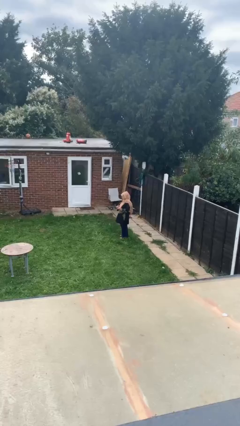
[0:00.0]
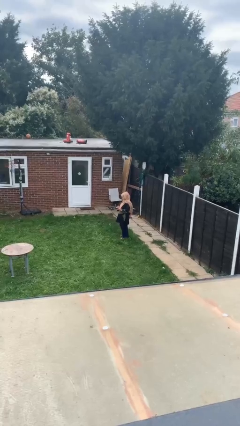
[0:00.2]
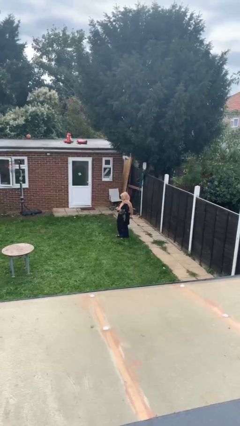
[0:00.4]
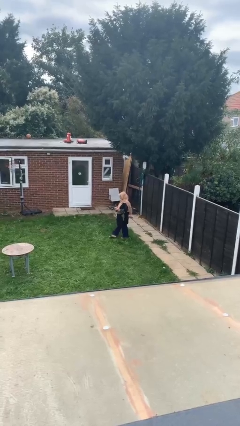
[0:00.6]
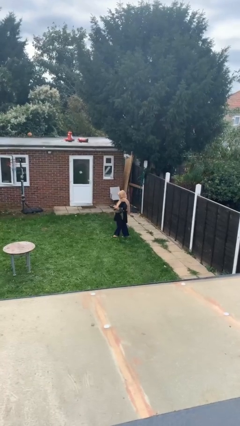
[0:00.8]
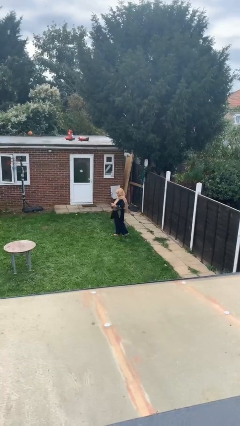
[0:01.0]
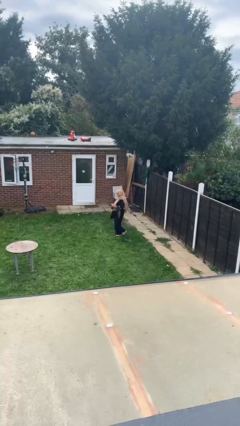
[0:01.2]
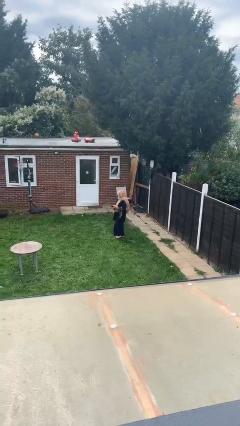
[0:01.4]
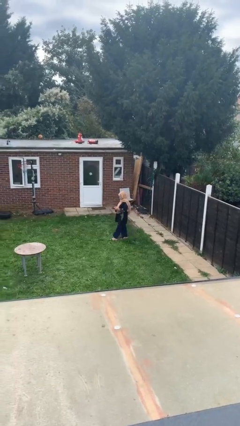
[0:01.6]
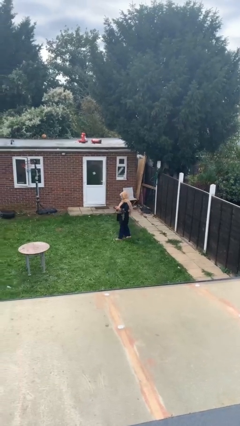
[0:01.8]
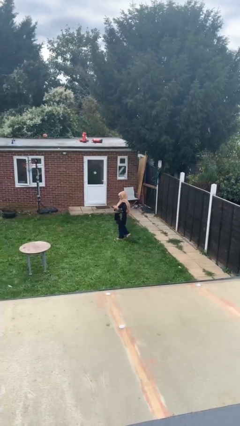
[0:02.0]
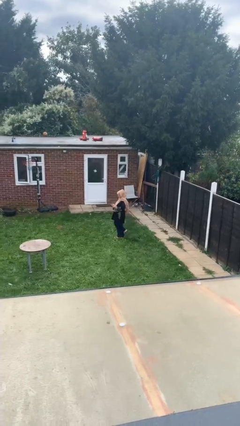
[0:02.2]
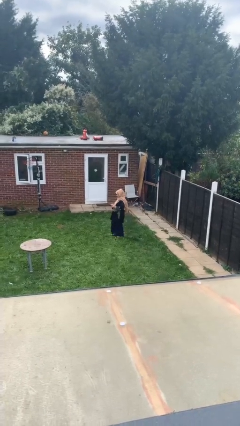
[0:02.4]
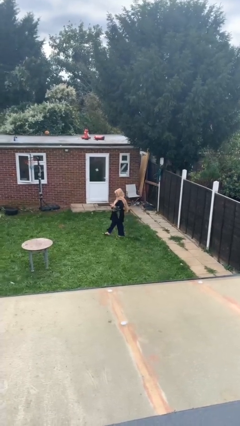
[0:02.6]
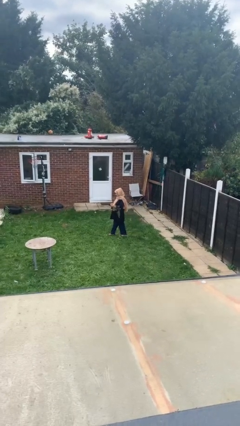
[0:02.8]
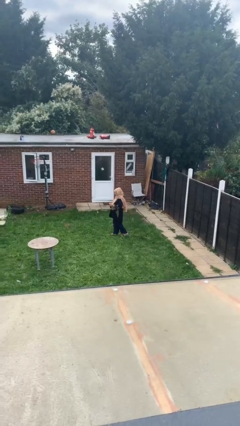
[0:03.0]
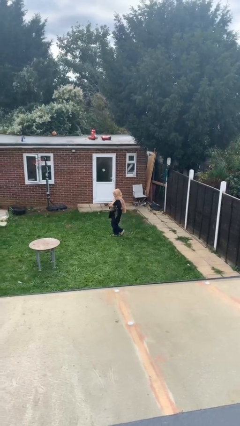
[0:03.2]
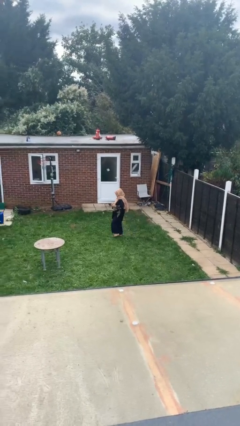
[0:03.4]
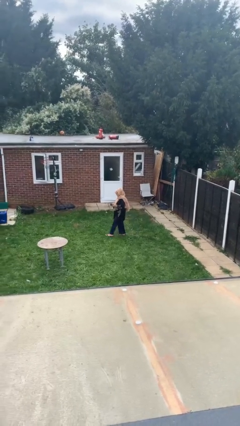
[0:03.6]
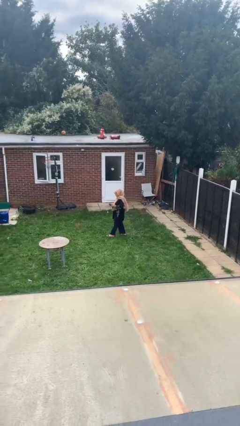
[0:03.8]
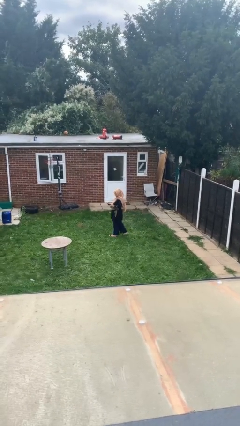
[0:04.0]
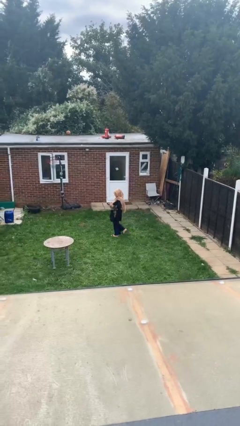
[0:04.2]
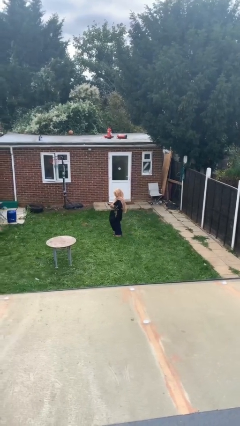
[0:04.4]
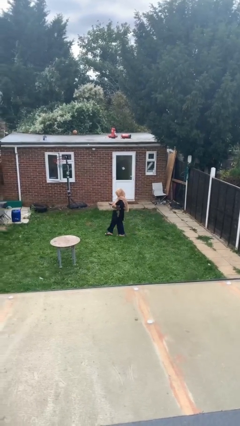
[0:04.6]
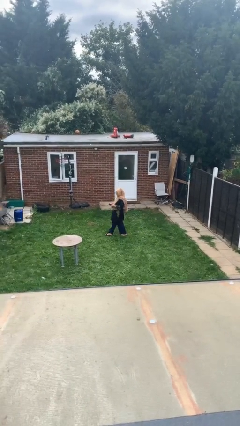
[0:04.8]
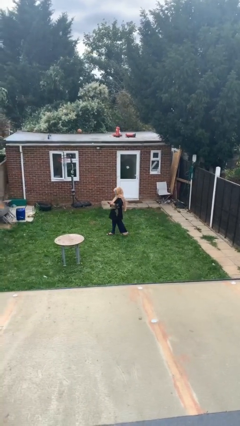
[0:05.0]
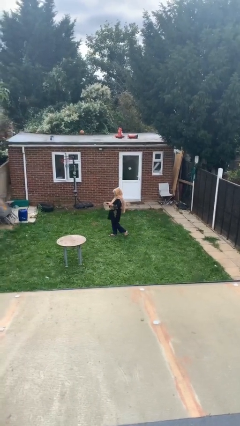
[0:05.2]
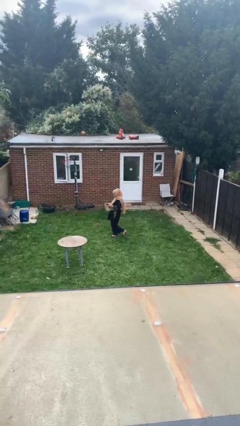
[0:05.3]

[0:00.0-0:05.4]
person texts on phone

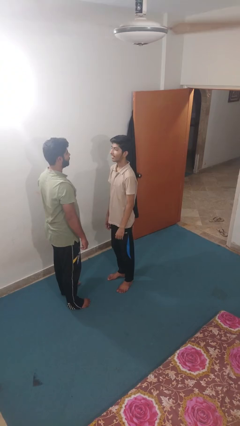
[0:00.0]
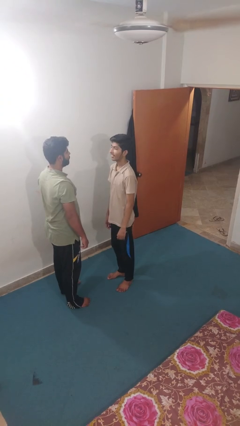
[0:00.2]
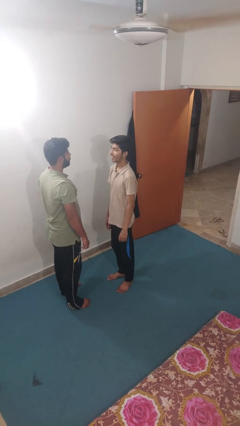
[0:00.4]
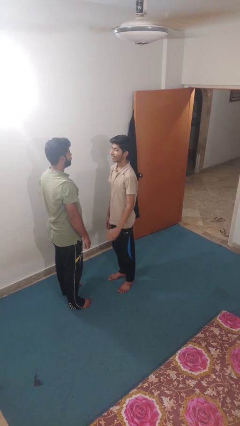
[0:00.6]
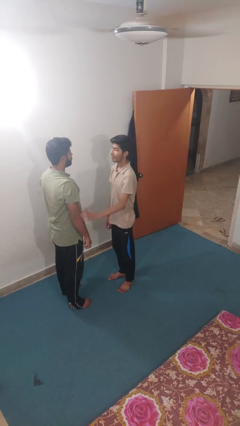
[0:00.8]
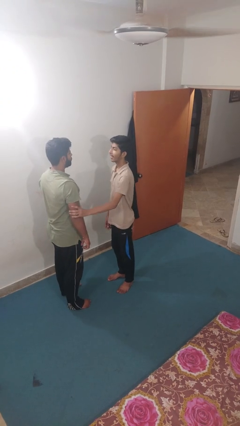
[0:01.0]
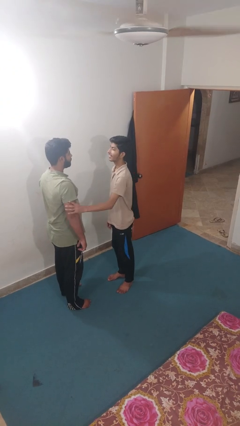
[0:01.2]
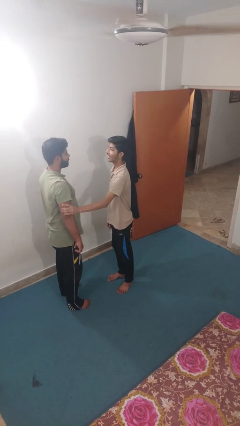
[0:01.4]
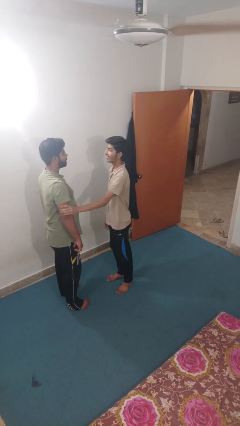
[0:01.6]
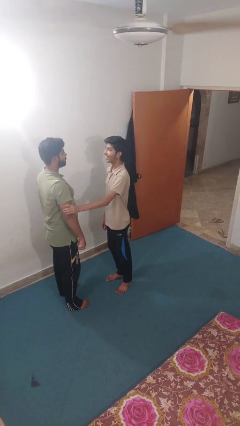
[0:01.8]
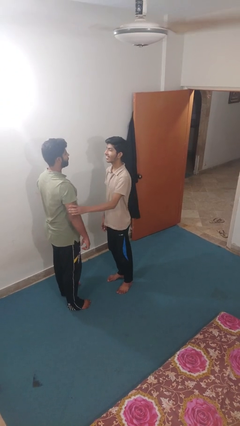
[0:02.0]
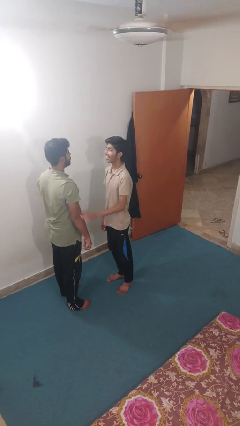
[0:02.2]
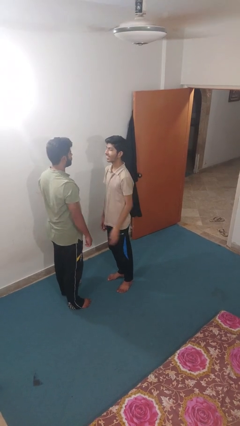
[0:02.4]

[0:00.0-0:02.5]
person grabs person by bicep

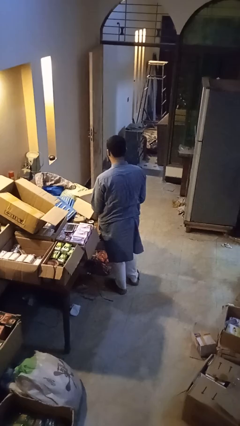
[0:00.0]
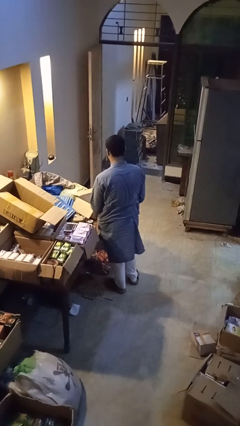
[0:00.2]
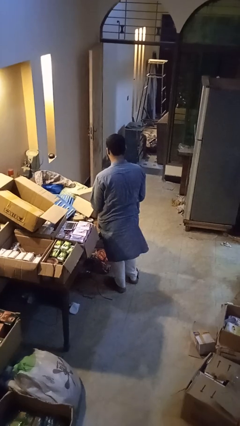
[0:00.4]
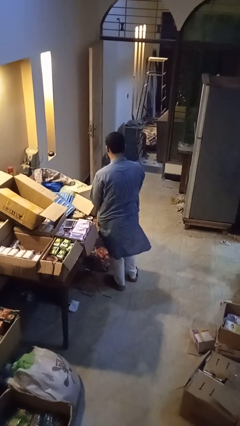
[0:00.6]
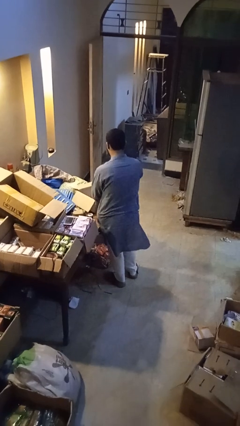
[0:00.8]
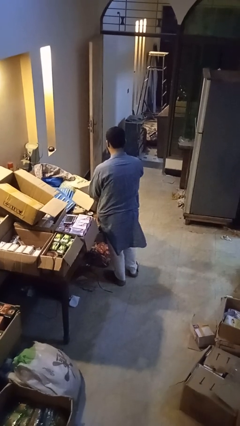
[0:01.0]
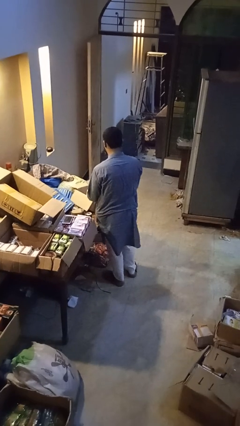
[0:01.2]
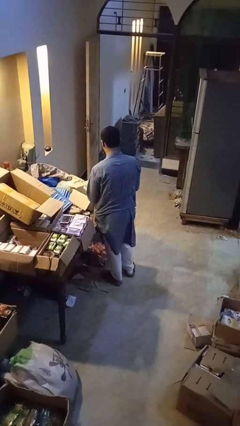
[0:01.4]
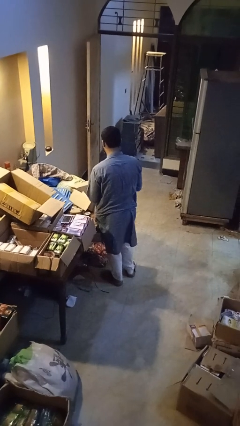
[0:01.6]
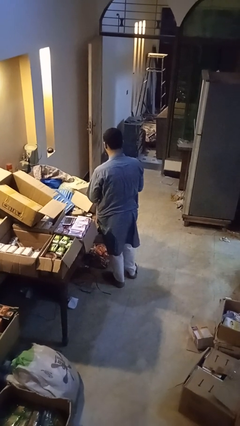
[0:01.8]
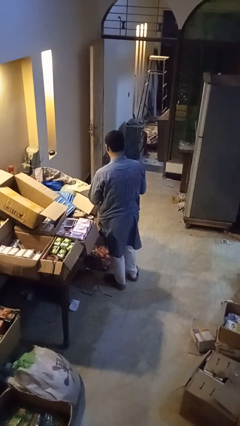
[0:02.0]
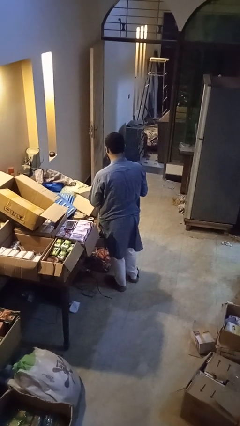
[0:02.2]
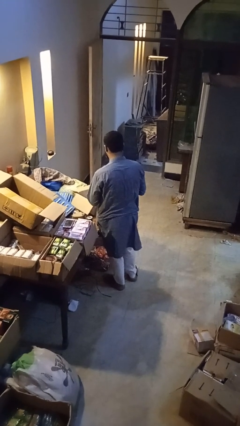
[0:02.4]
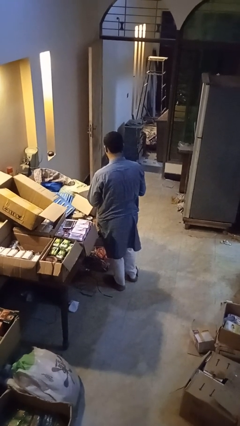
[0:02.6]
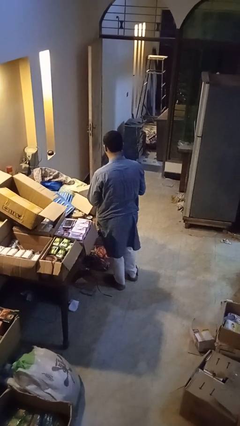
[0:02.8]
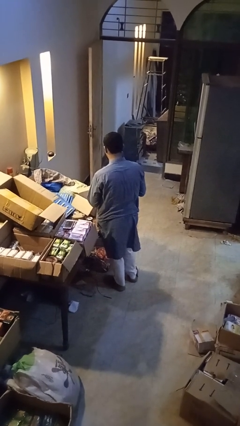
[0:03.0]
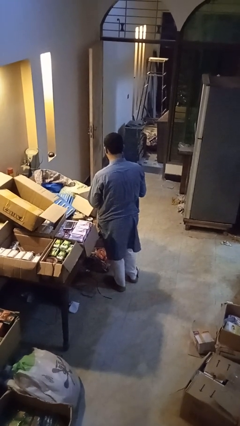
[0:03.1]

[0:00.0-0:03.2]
person takes object from box

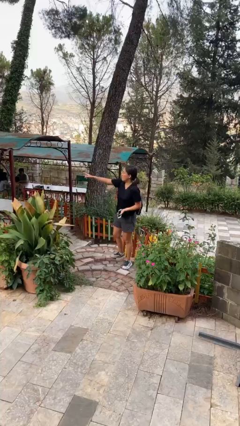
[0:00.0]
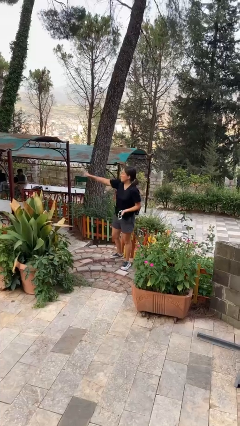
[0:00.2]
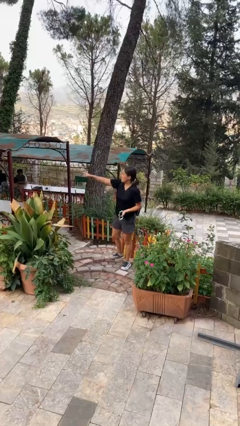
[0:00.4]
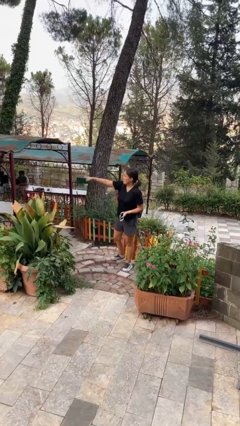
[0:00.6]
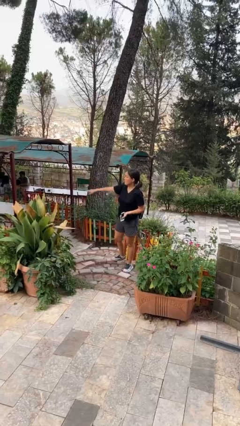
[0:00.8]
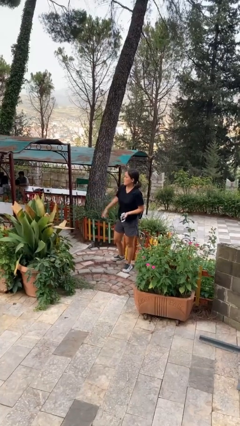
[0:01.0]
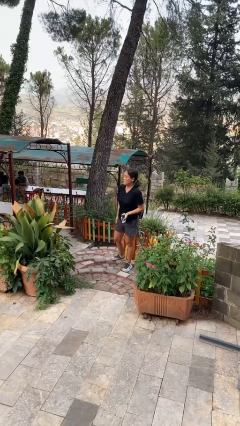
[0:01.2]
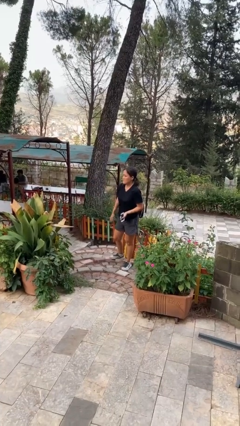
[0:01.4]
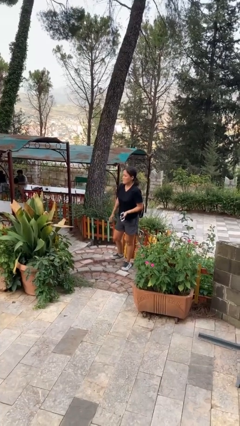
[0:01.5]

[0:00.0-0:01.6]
person points at person

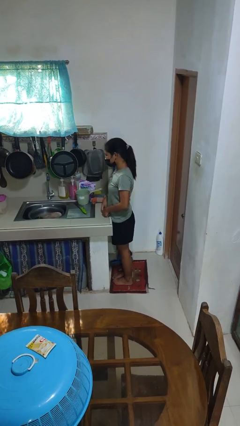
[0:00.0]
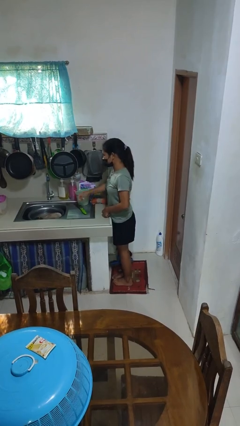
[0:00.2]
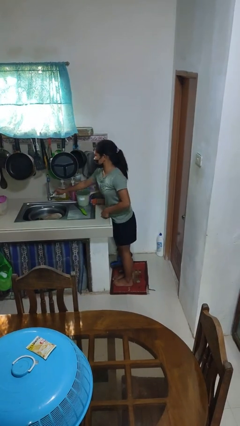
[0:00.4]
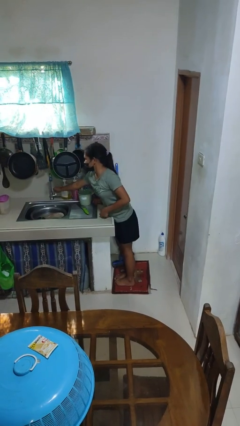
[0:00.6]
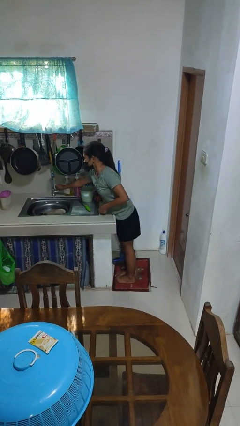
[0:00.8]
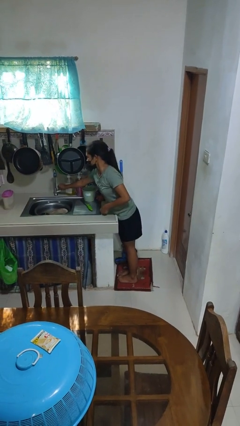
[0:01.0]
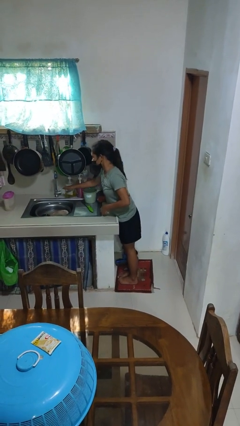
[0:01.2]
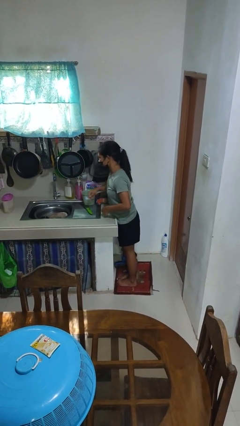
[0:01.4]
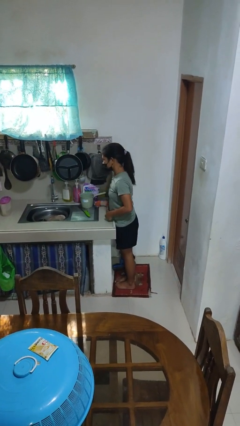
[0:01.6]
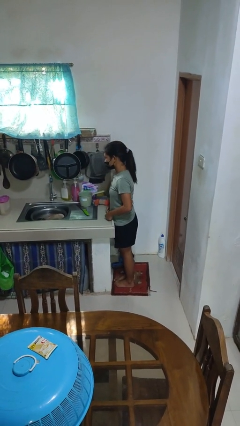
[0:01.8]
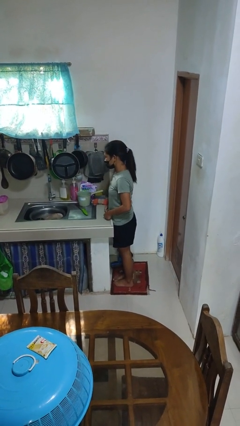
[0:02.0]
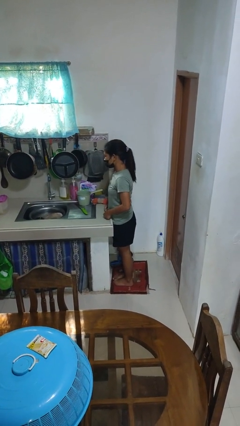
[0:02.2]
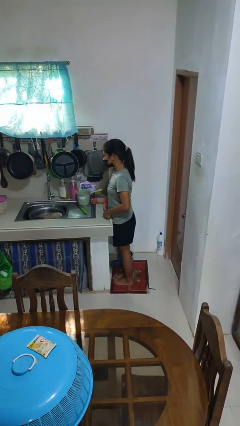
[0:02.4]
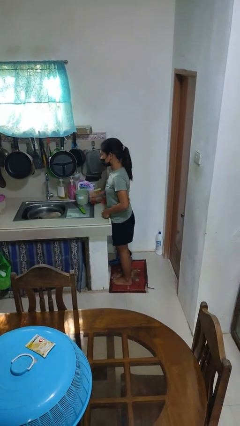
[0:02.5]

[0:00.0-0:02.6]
person turns on faucet

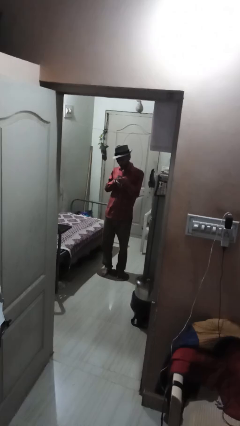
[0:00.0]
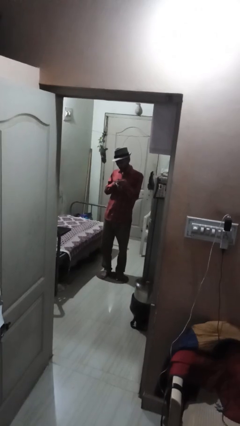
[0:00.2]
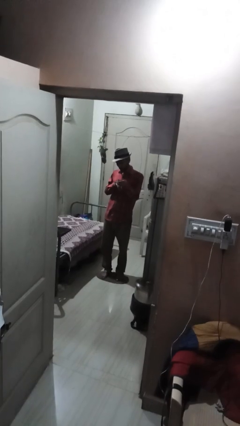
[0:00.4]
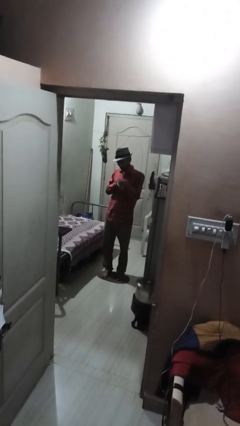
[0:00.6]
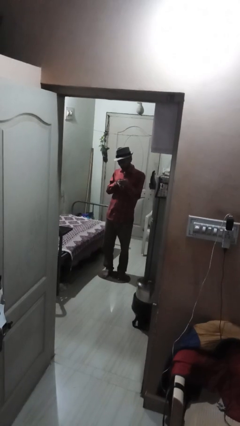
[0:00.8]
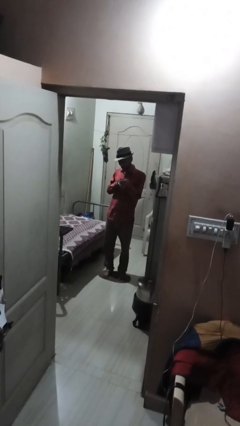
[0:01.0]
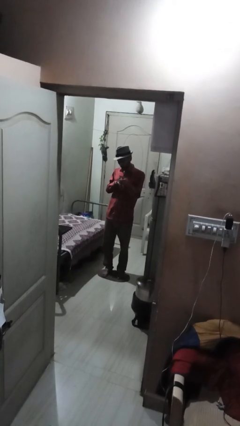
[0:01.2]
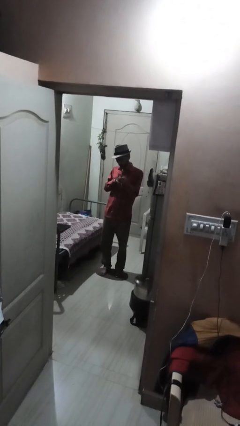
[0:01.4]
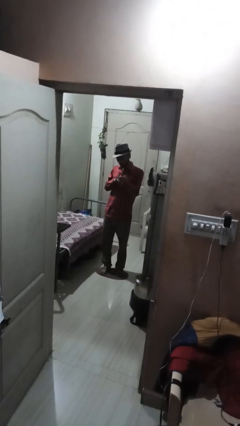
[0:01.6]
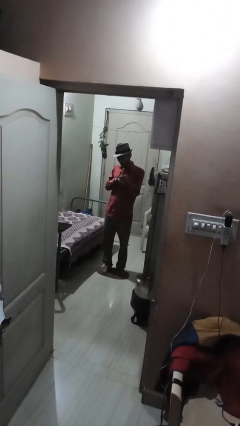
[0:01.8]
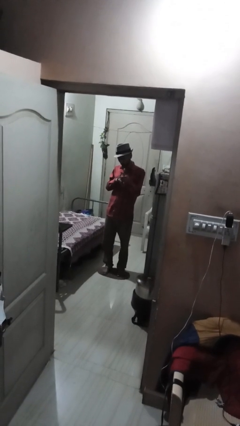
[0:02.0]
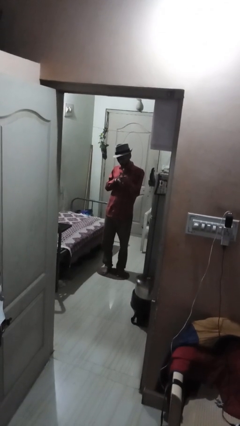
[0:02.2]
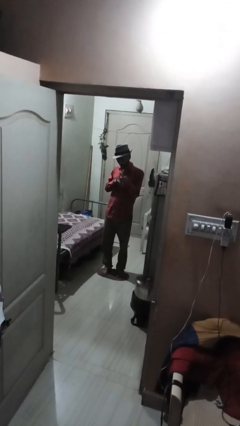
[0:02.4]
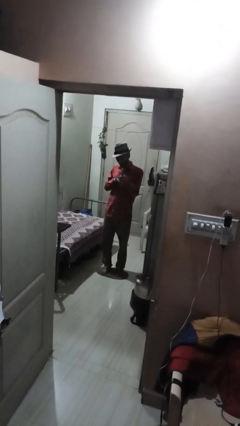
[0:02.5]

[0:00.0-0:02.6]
person clips fingernails
